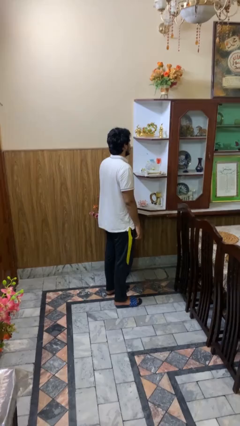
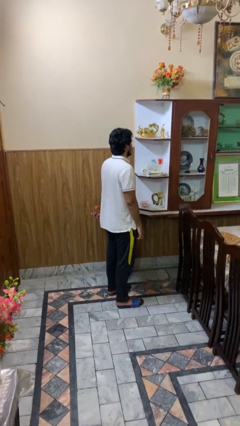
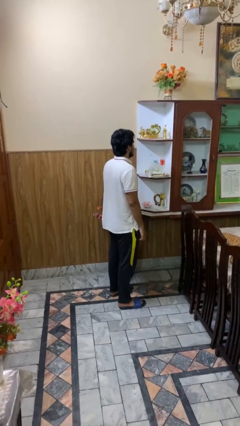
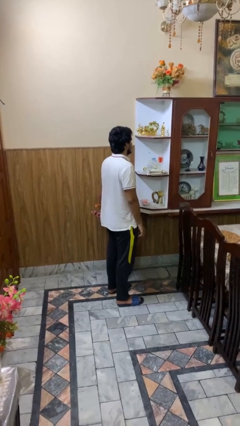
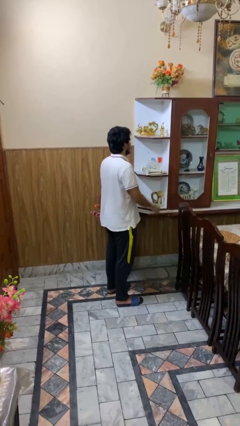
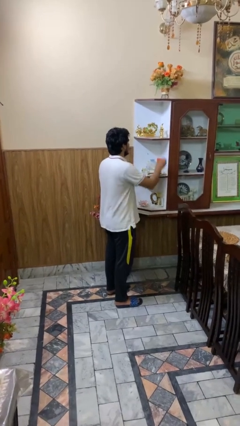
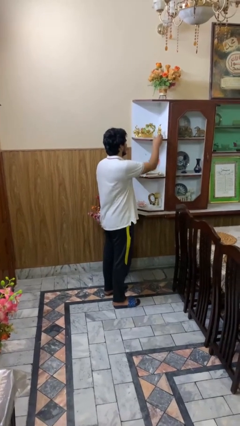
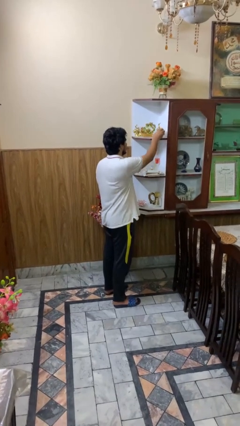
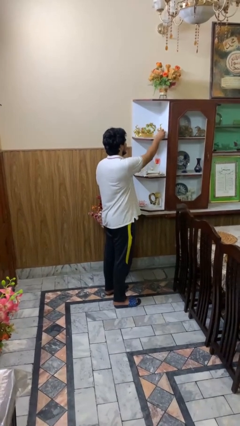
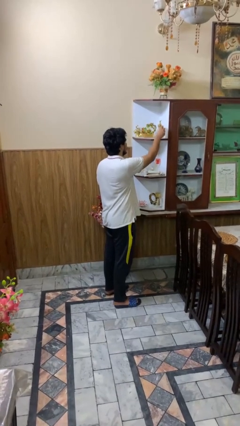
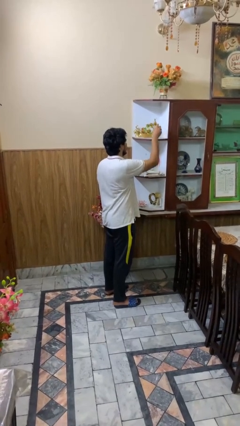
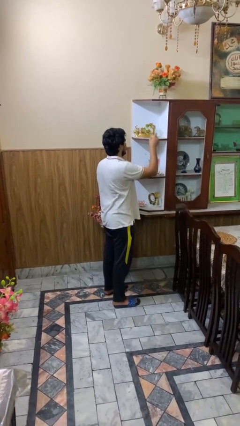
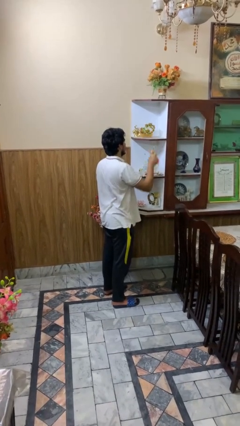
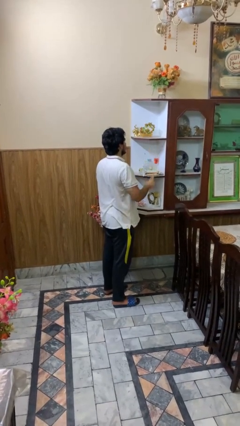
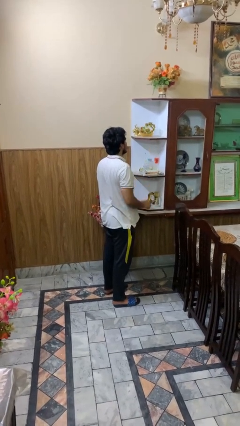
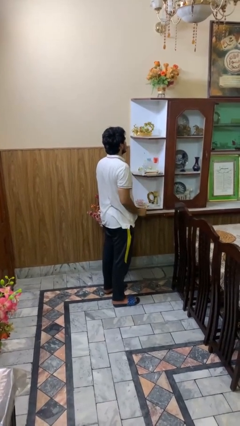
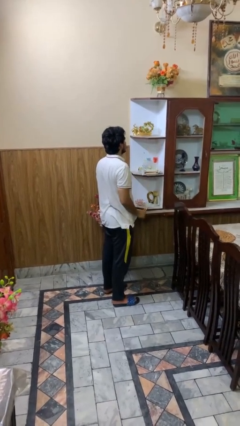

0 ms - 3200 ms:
person picks up object from shelf

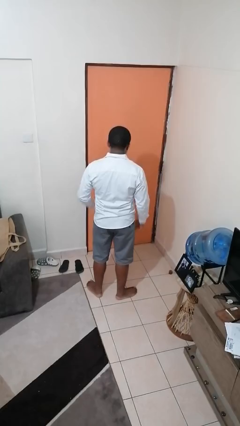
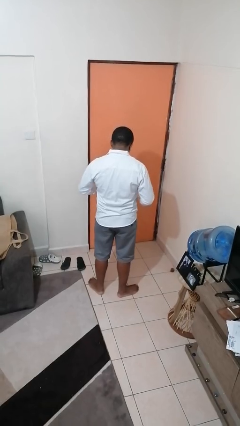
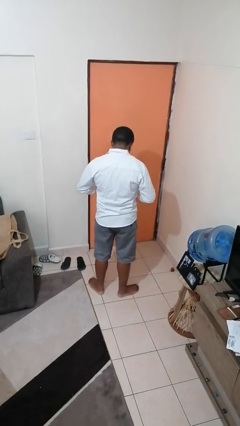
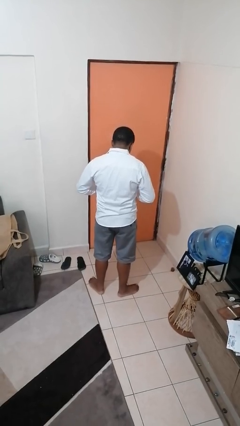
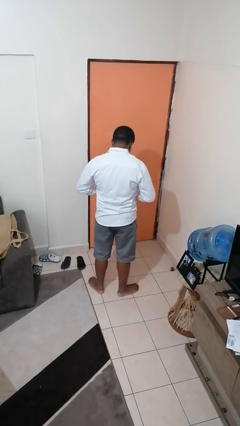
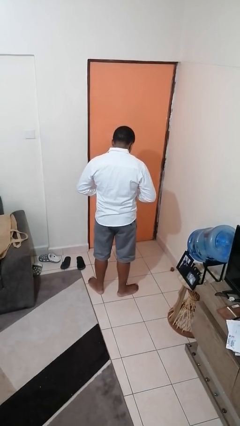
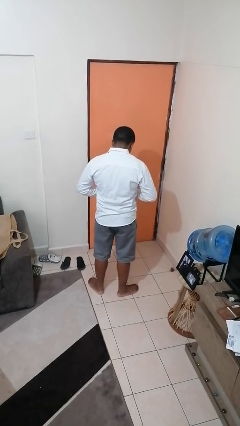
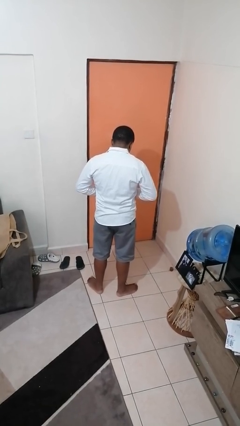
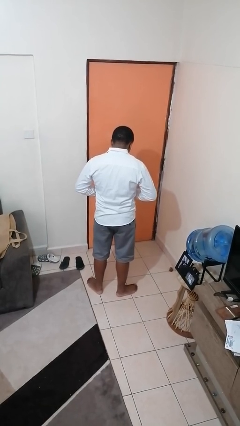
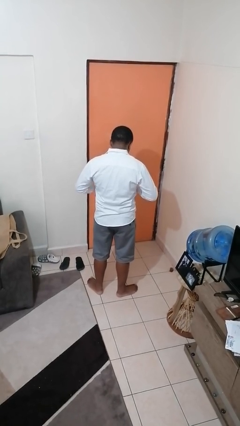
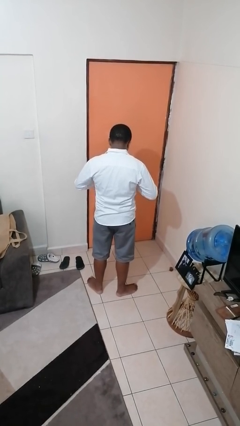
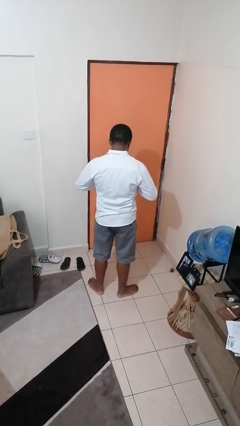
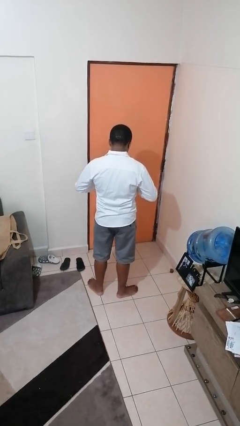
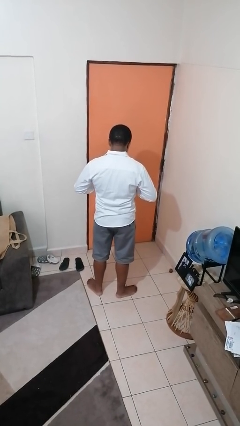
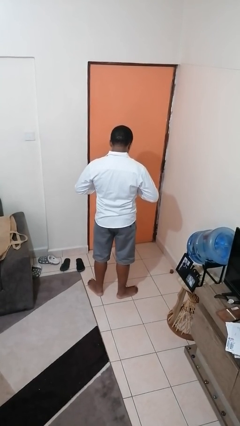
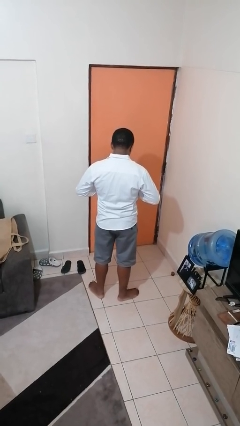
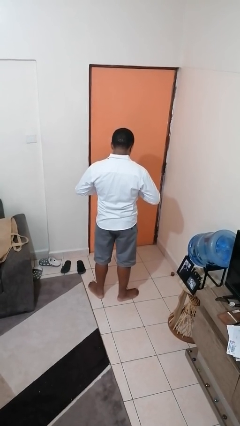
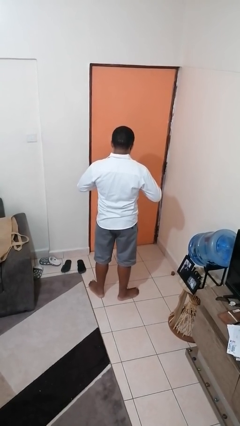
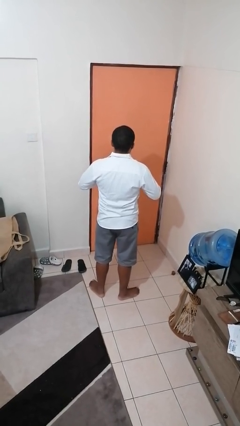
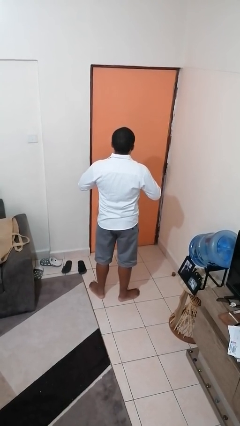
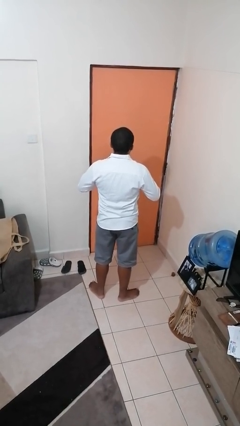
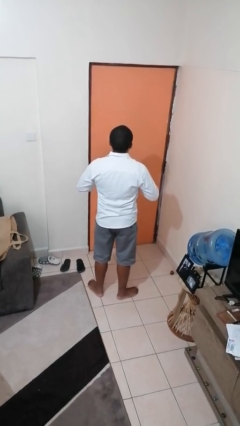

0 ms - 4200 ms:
person buttons shirt

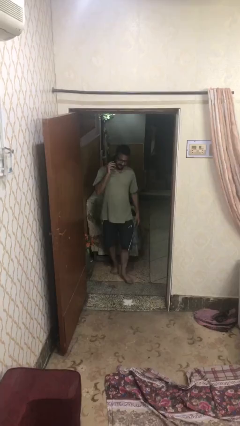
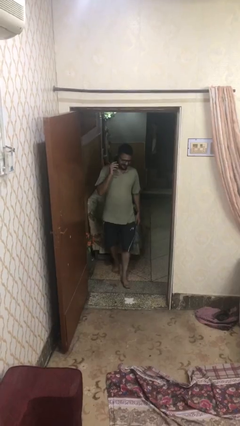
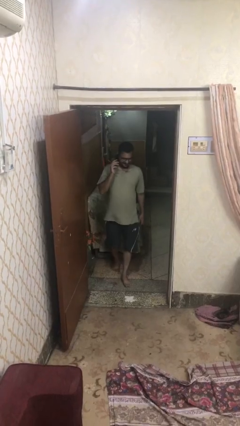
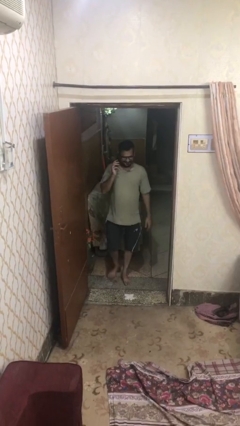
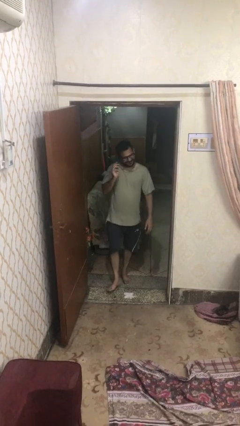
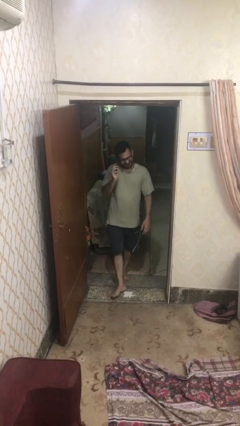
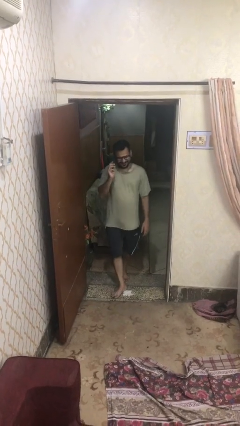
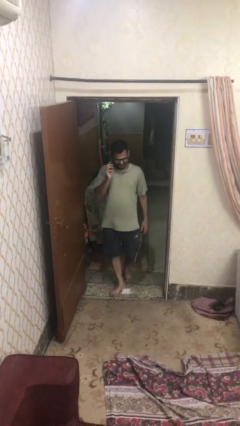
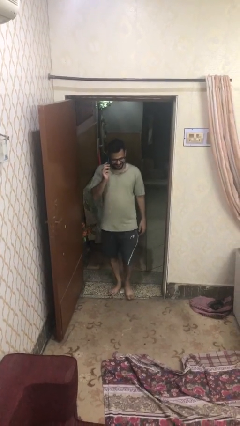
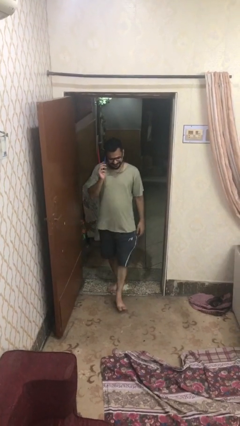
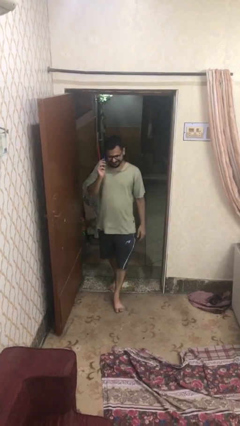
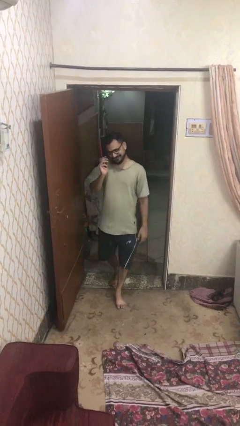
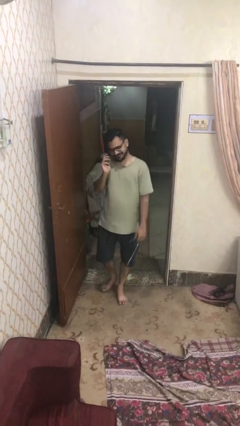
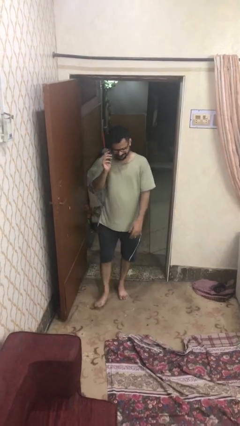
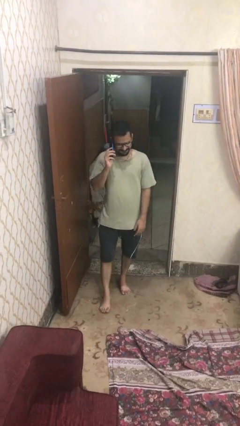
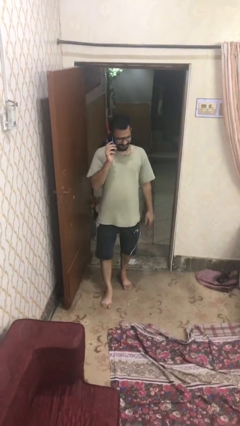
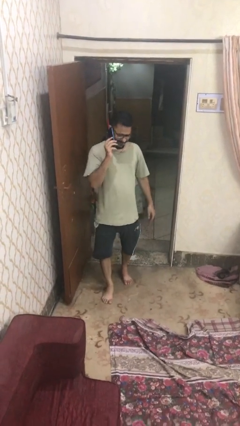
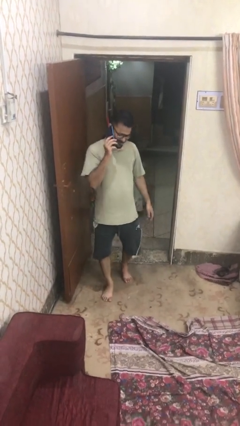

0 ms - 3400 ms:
person enters scene through structure

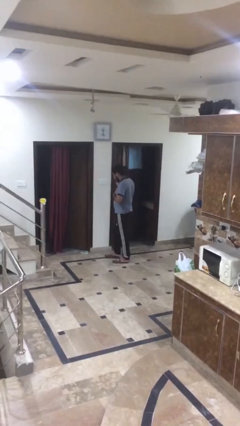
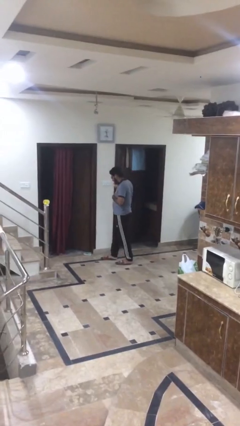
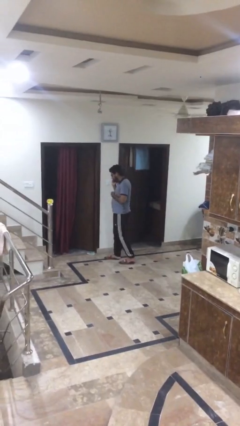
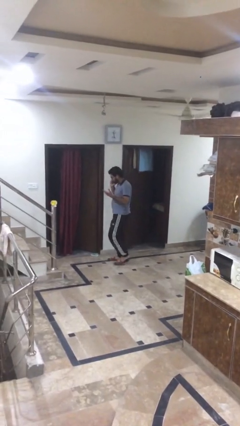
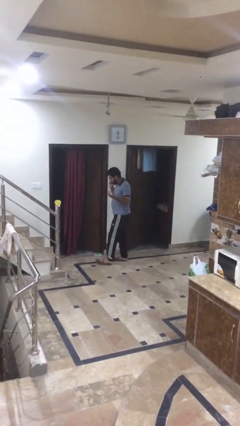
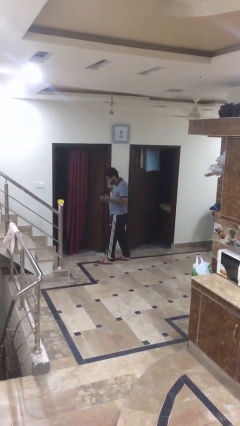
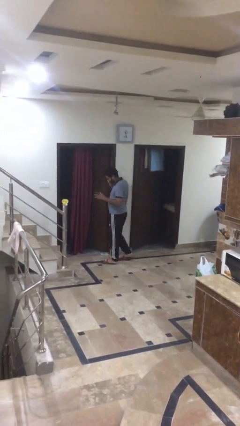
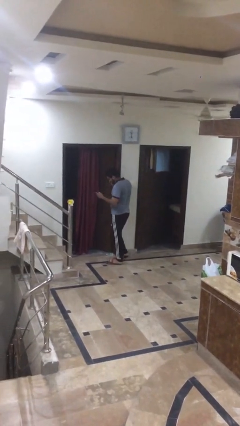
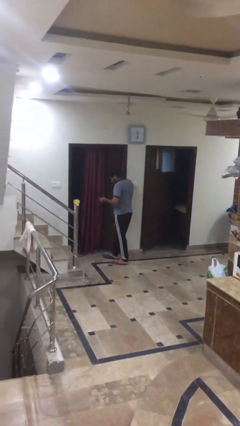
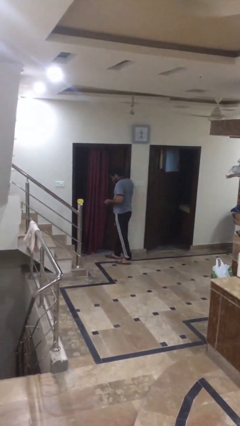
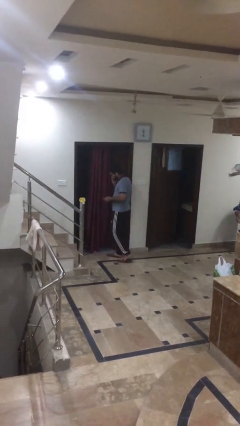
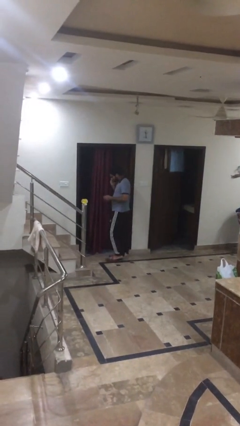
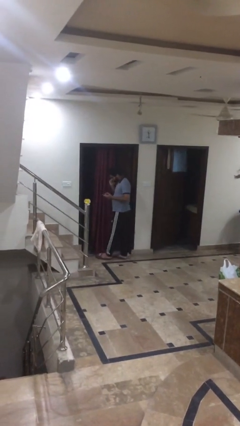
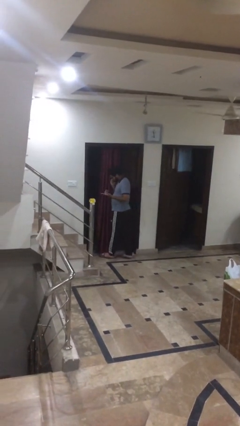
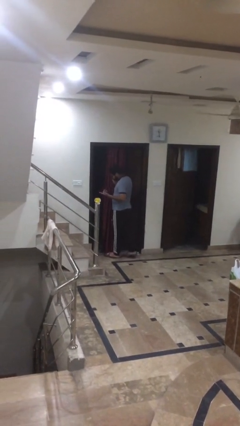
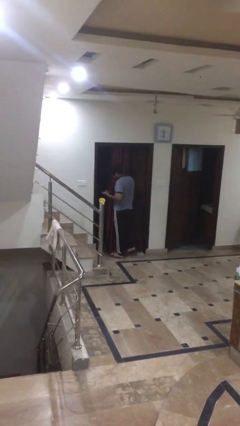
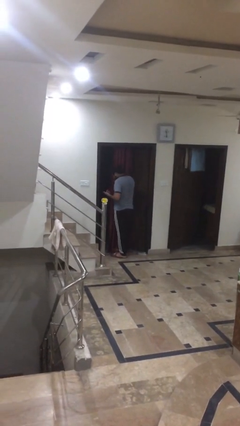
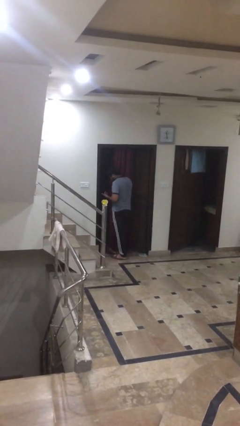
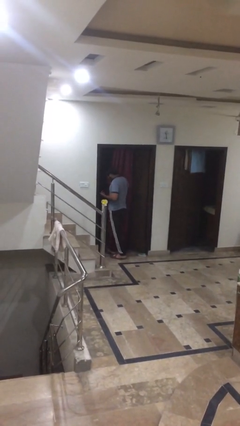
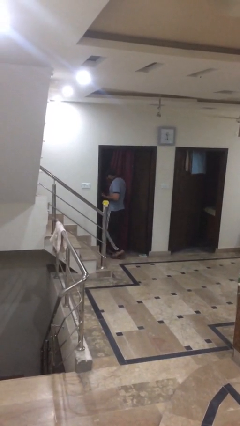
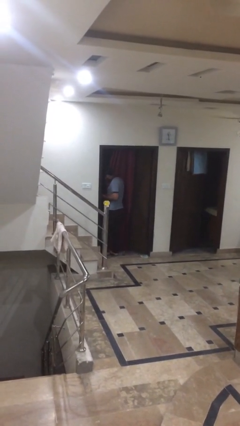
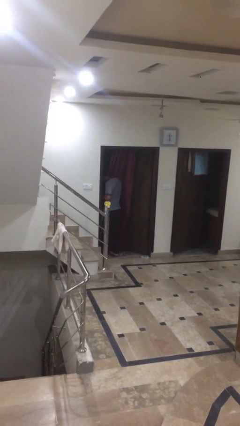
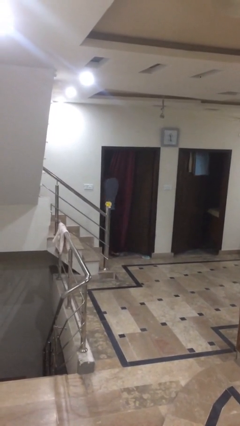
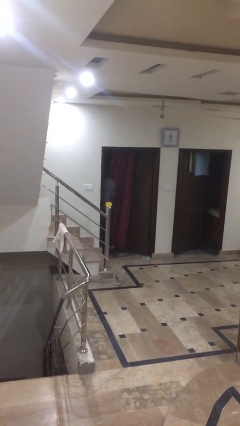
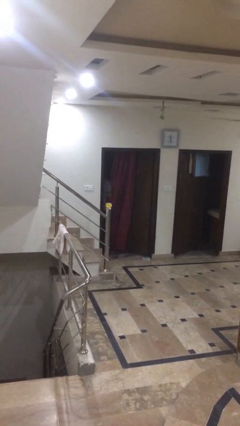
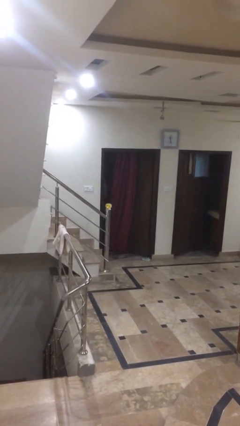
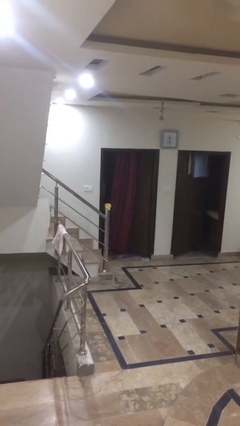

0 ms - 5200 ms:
person exits scene through structure

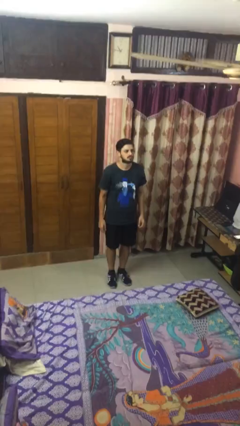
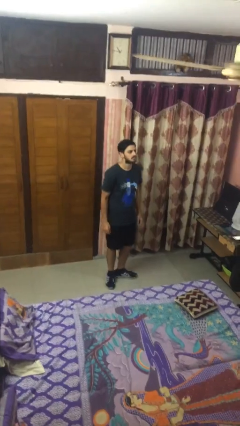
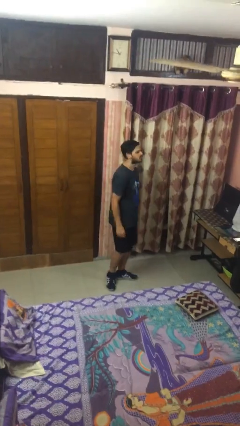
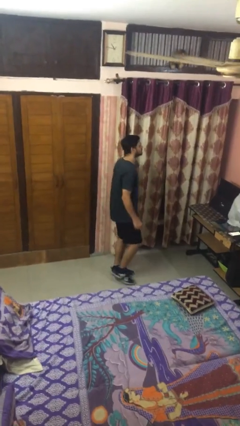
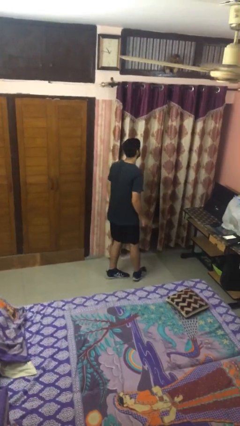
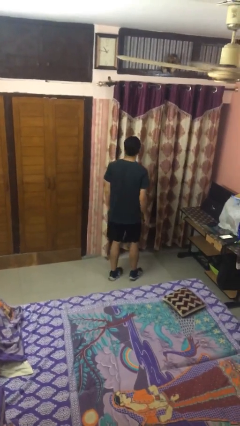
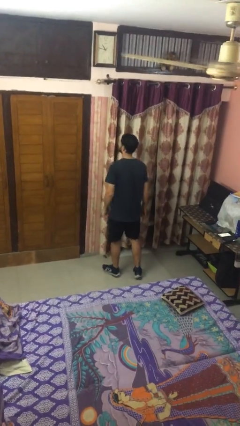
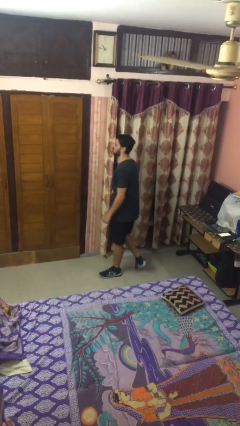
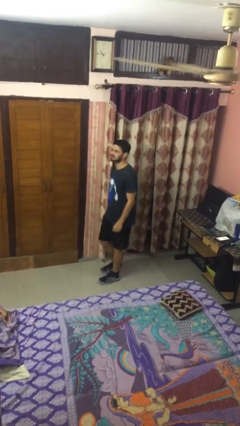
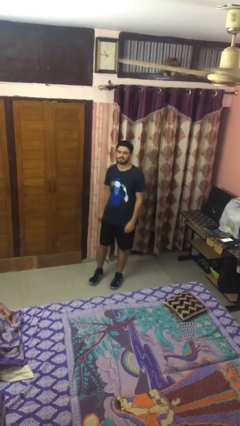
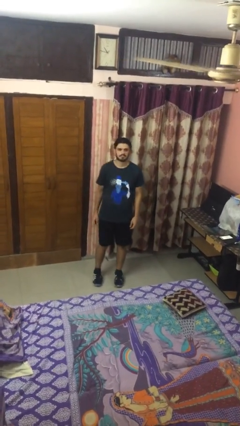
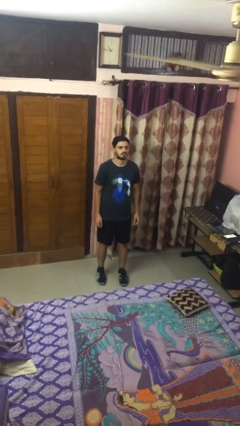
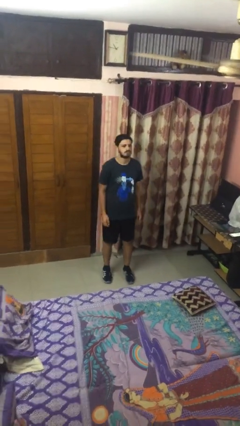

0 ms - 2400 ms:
person twirls
